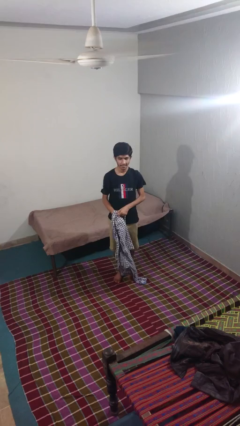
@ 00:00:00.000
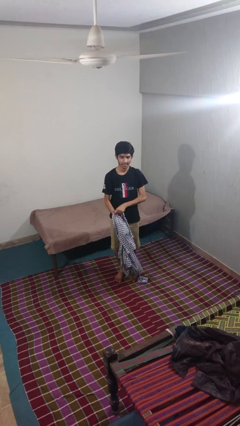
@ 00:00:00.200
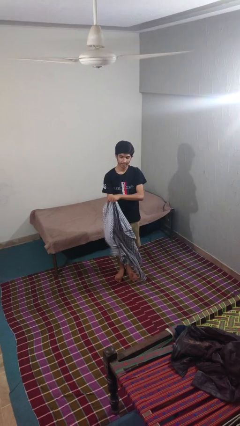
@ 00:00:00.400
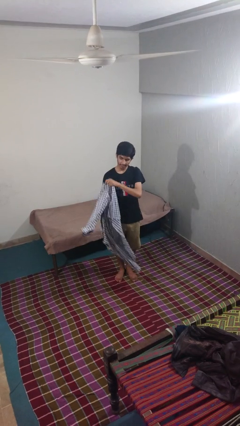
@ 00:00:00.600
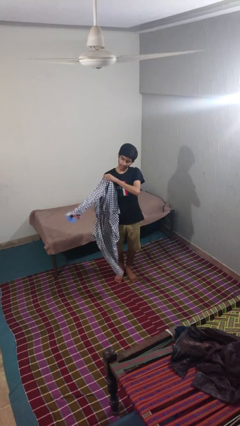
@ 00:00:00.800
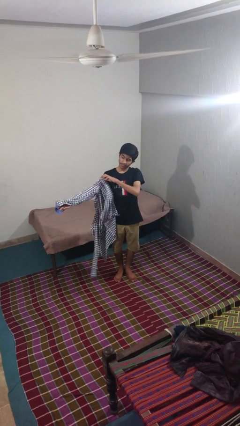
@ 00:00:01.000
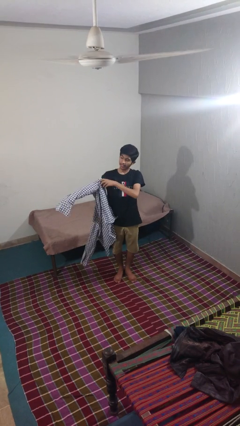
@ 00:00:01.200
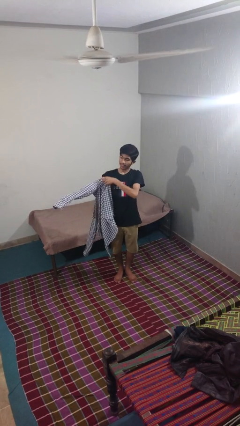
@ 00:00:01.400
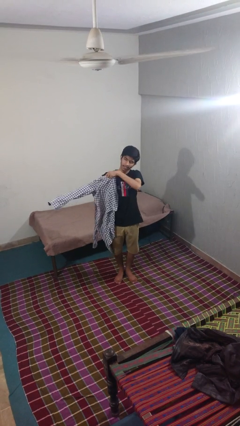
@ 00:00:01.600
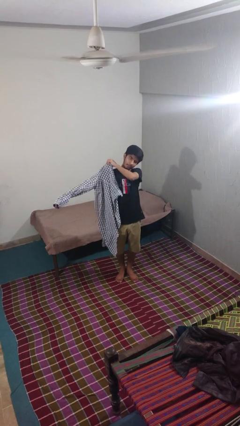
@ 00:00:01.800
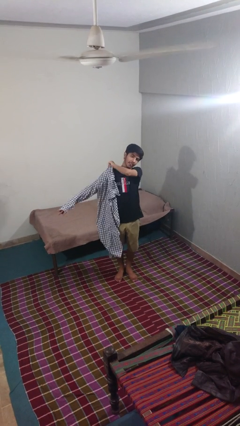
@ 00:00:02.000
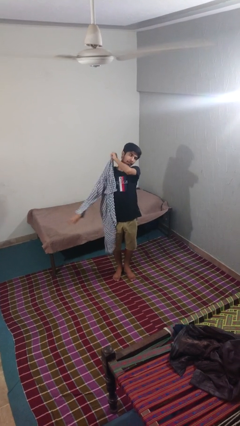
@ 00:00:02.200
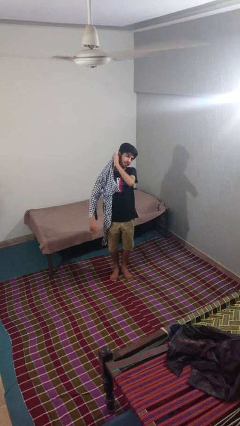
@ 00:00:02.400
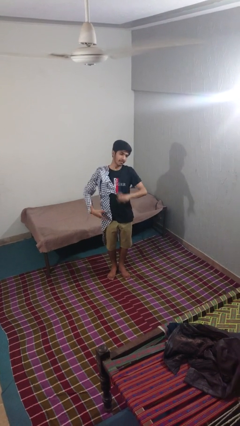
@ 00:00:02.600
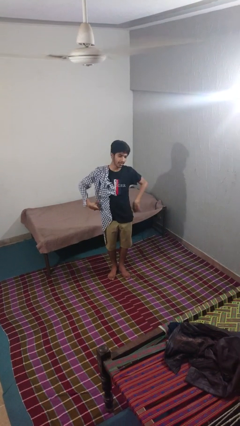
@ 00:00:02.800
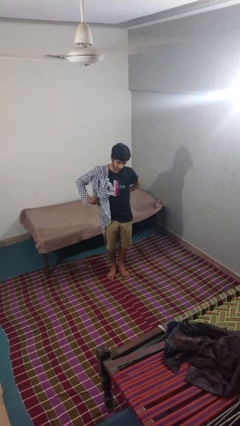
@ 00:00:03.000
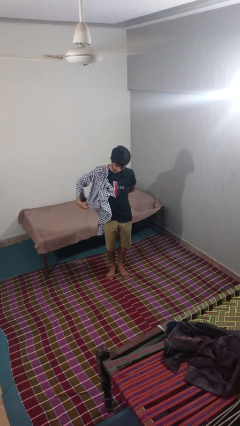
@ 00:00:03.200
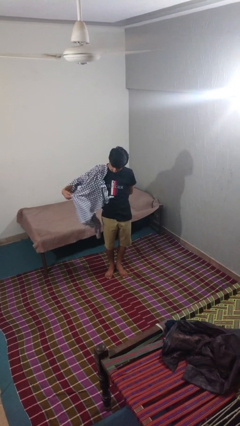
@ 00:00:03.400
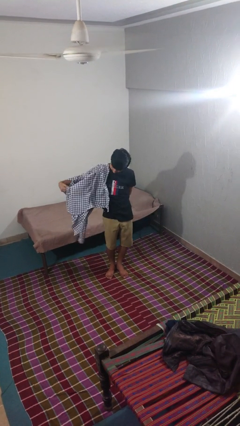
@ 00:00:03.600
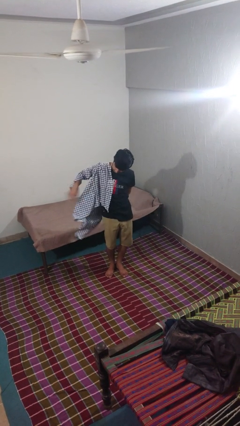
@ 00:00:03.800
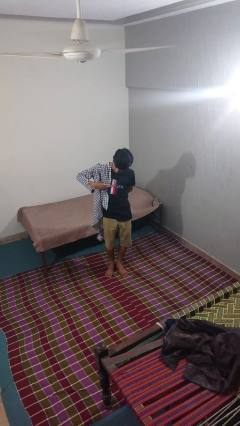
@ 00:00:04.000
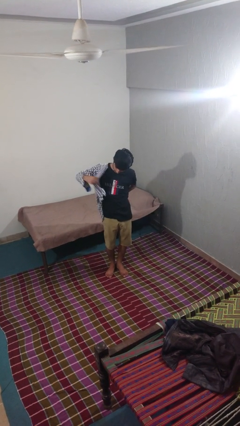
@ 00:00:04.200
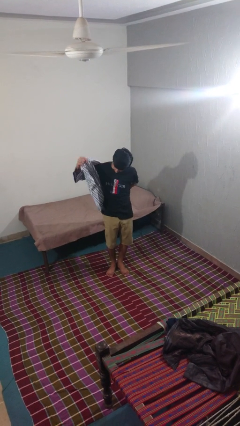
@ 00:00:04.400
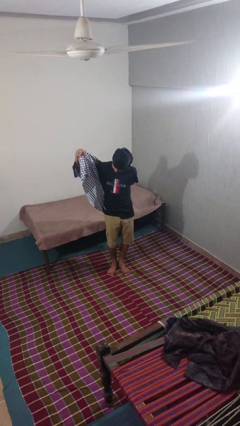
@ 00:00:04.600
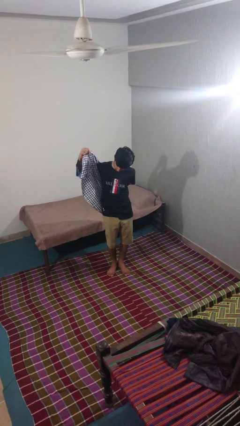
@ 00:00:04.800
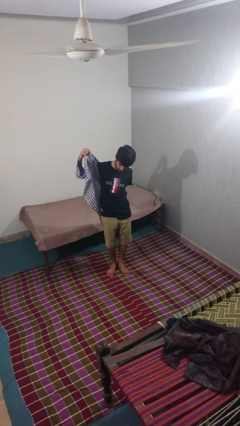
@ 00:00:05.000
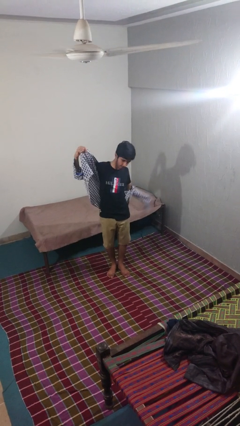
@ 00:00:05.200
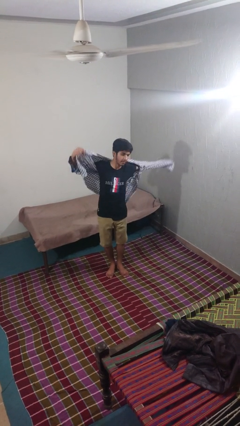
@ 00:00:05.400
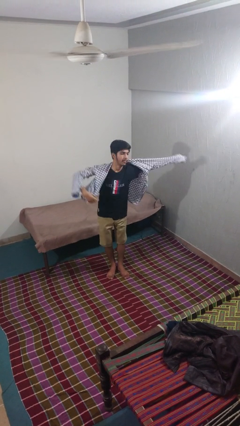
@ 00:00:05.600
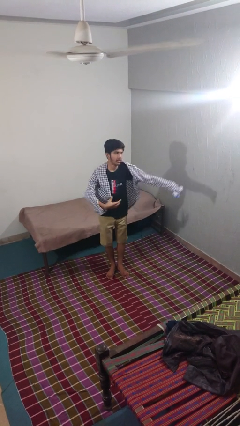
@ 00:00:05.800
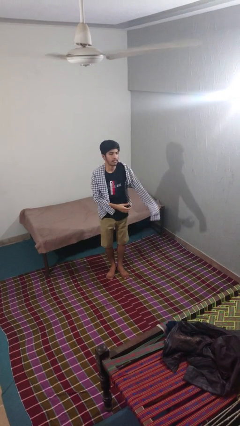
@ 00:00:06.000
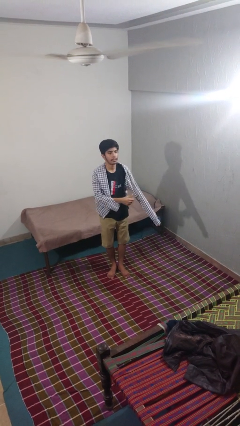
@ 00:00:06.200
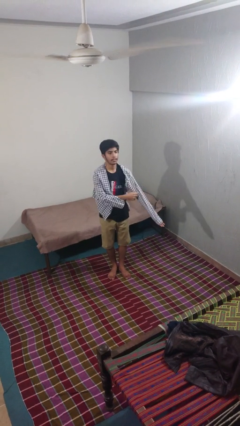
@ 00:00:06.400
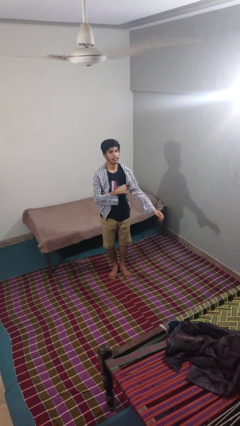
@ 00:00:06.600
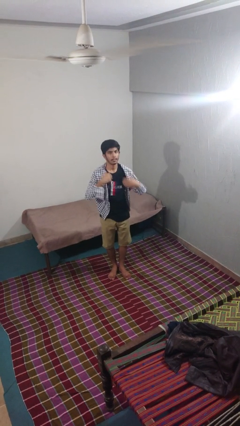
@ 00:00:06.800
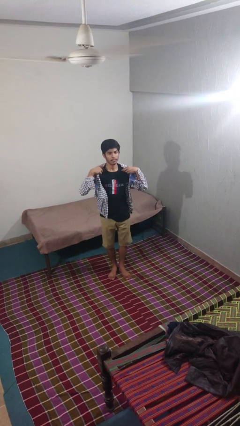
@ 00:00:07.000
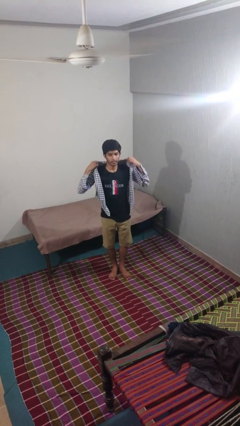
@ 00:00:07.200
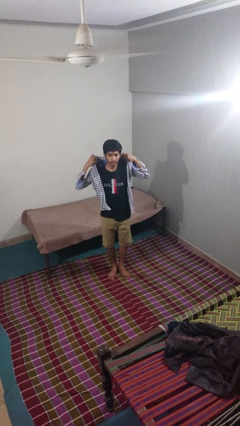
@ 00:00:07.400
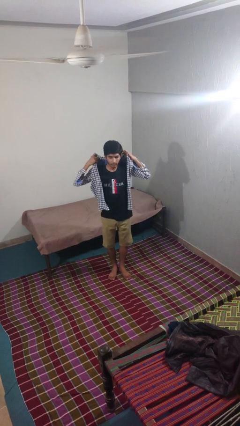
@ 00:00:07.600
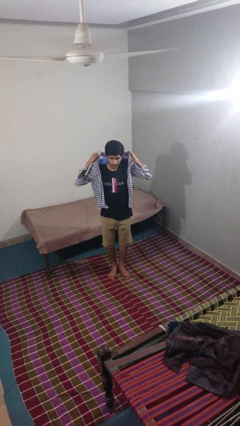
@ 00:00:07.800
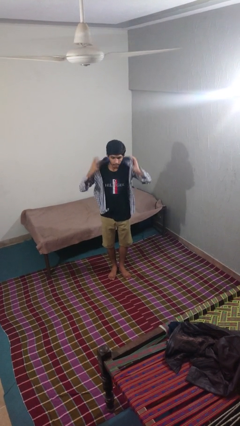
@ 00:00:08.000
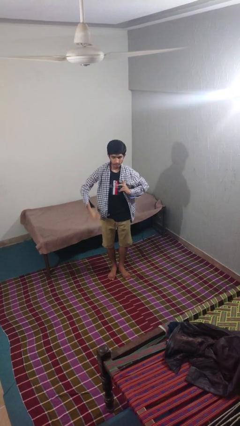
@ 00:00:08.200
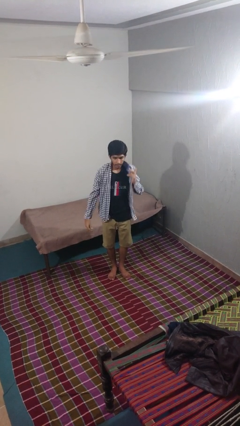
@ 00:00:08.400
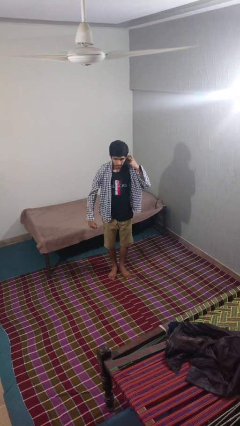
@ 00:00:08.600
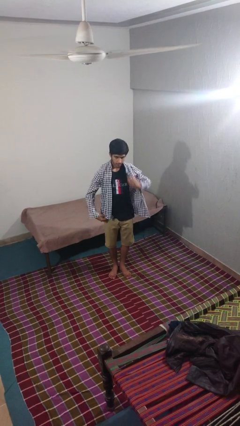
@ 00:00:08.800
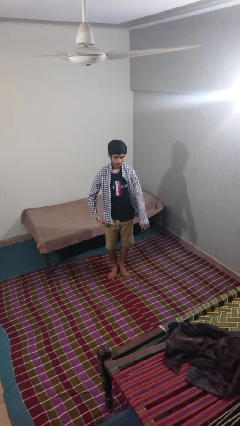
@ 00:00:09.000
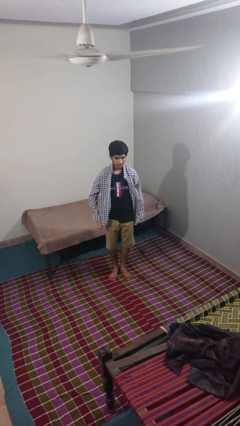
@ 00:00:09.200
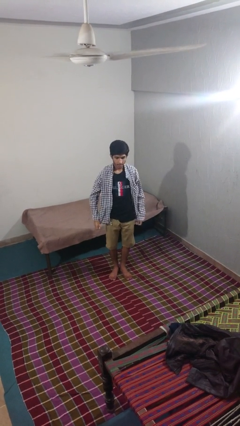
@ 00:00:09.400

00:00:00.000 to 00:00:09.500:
person puts on shirt

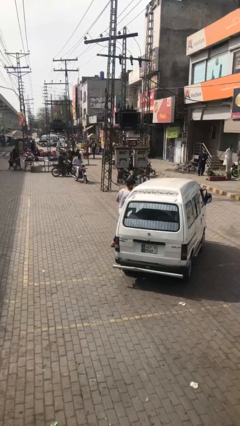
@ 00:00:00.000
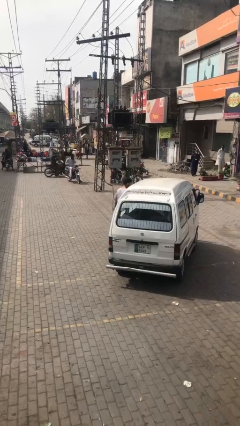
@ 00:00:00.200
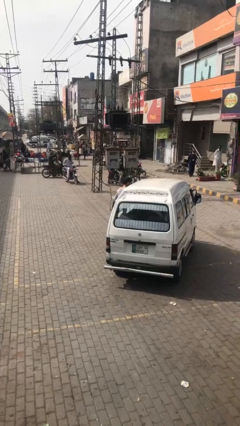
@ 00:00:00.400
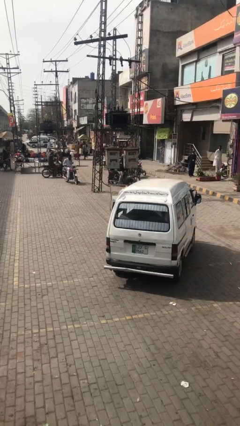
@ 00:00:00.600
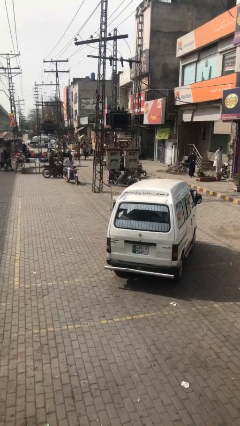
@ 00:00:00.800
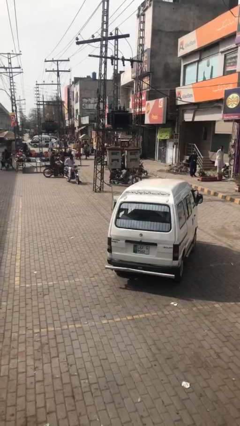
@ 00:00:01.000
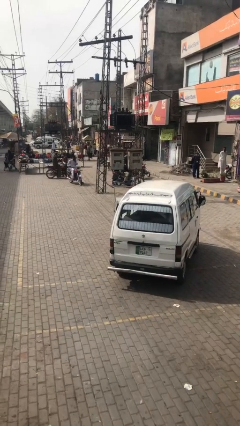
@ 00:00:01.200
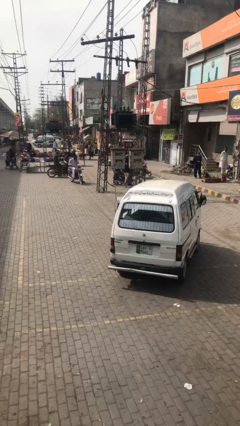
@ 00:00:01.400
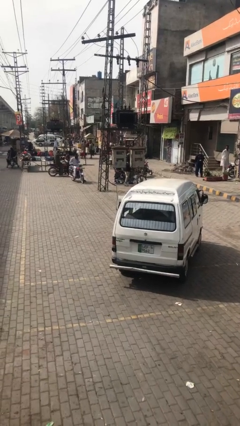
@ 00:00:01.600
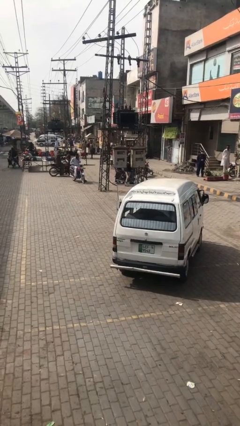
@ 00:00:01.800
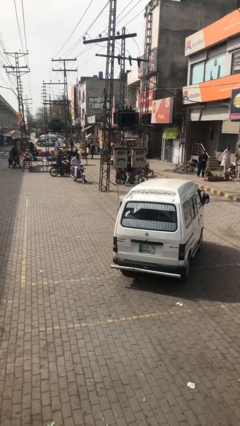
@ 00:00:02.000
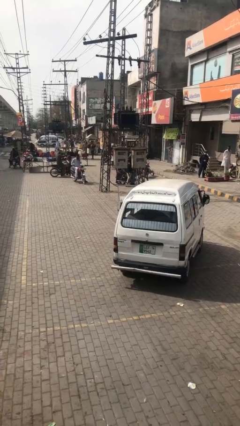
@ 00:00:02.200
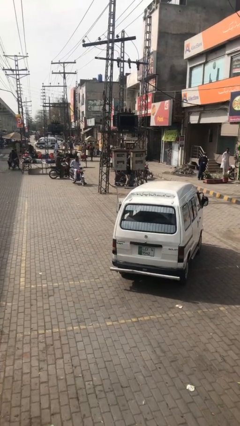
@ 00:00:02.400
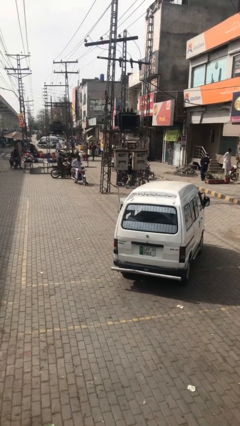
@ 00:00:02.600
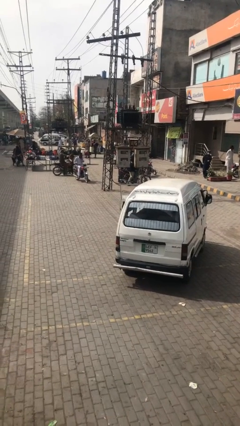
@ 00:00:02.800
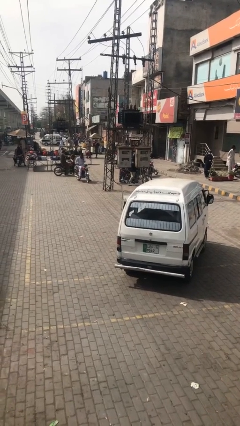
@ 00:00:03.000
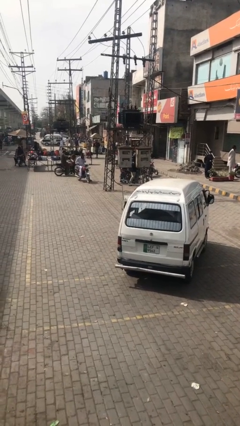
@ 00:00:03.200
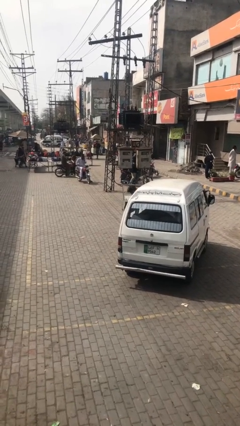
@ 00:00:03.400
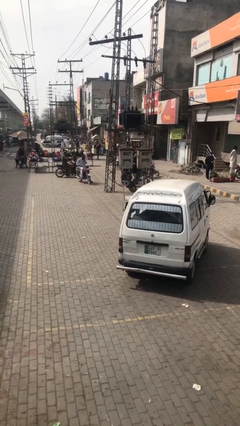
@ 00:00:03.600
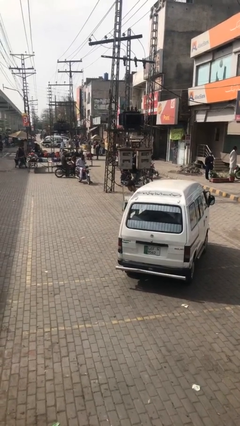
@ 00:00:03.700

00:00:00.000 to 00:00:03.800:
person enters car

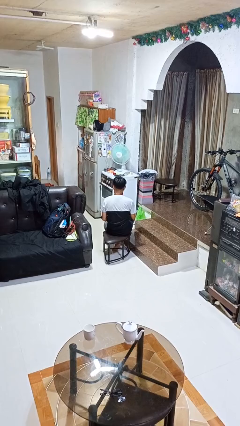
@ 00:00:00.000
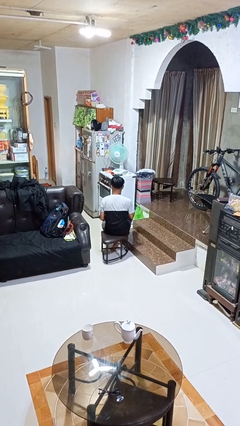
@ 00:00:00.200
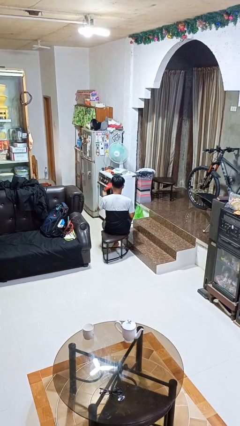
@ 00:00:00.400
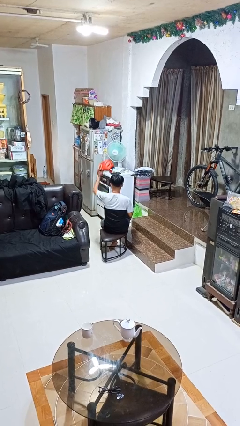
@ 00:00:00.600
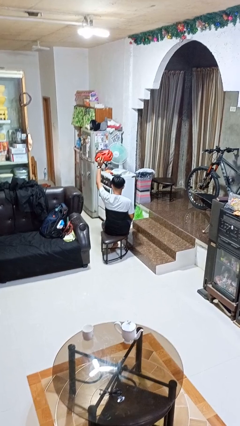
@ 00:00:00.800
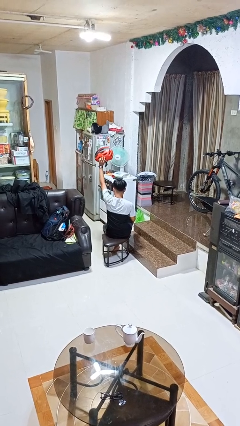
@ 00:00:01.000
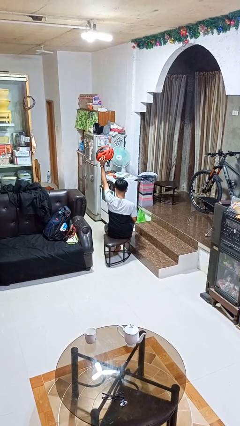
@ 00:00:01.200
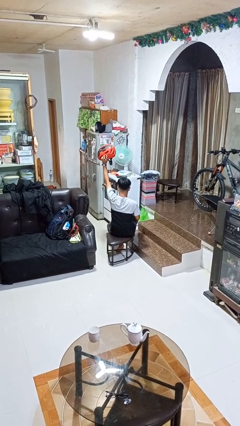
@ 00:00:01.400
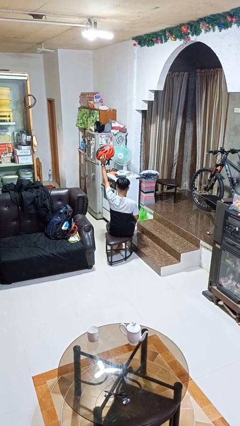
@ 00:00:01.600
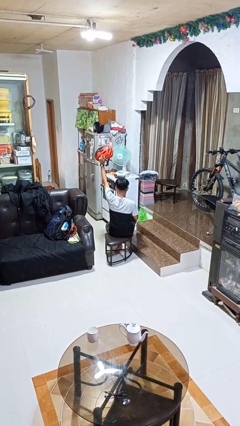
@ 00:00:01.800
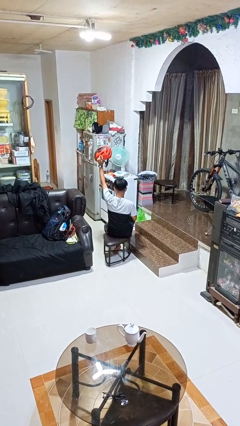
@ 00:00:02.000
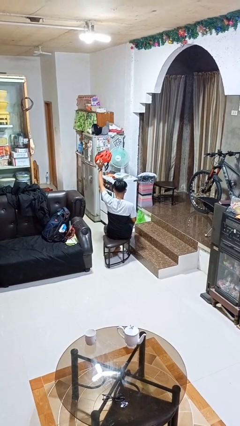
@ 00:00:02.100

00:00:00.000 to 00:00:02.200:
person holds object above head

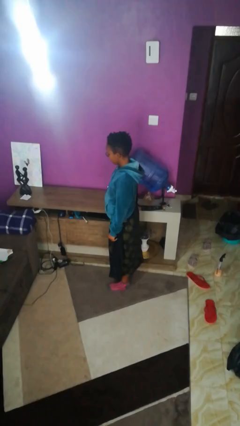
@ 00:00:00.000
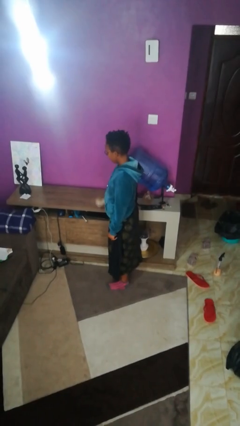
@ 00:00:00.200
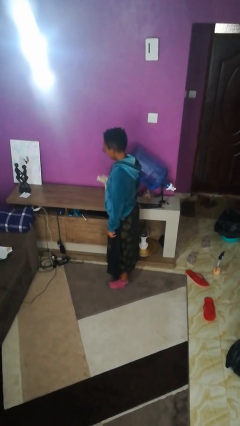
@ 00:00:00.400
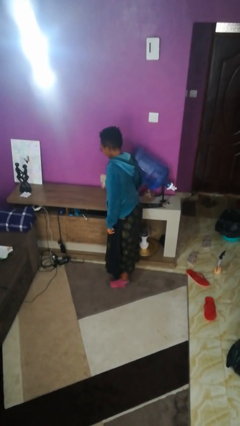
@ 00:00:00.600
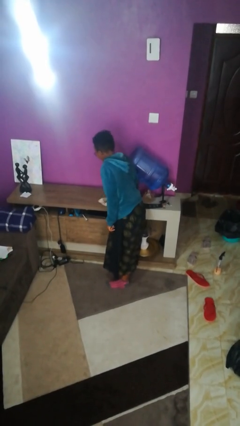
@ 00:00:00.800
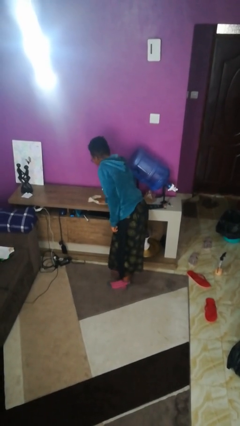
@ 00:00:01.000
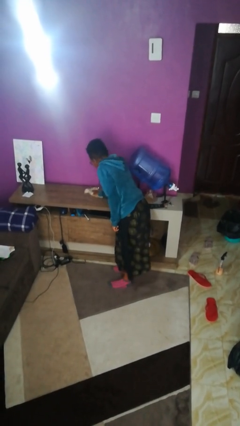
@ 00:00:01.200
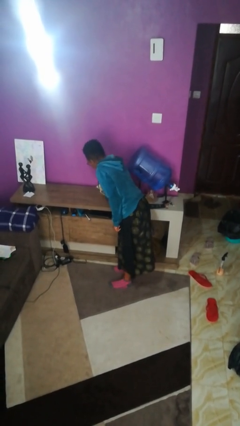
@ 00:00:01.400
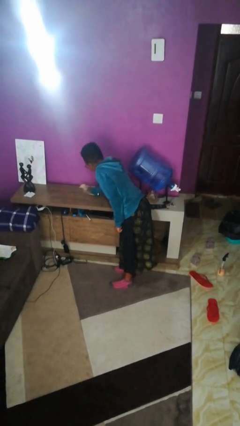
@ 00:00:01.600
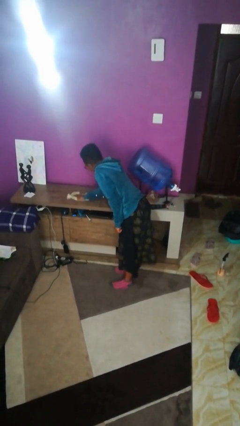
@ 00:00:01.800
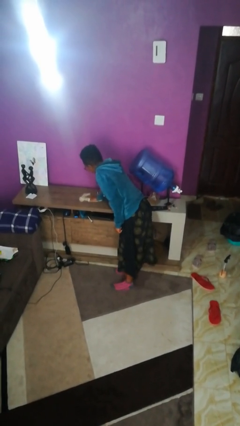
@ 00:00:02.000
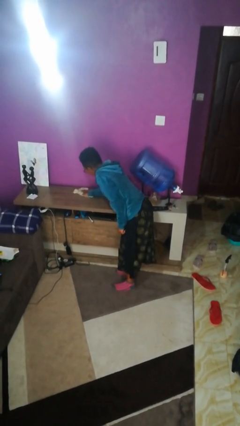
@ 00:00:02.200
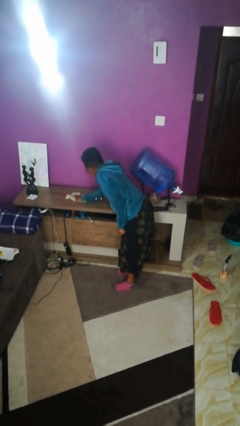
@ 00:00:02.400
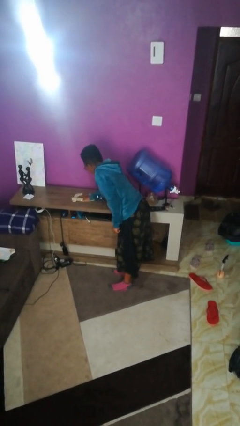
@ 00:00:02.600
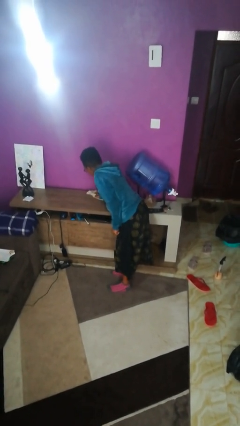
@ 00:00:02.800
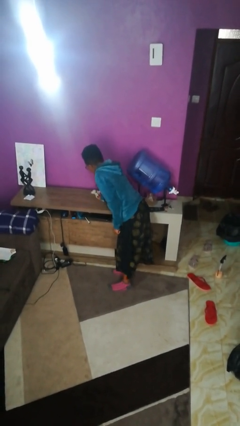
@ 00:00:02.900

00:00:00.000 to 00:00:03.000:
person cleans table with rag
